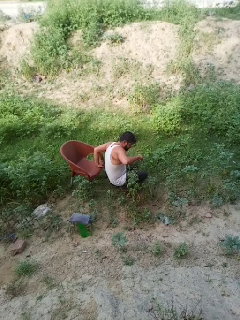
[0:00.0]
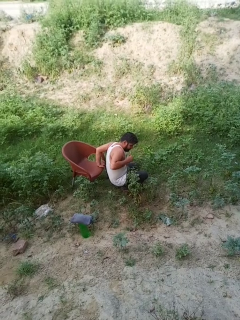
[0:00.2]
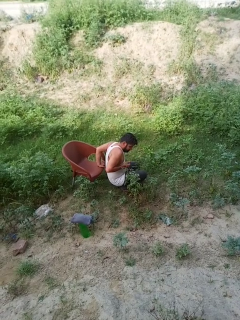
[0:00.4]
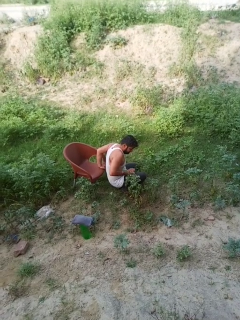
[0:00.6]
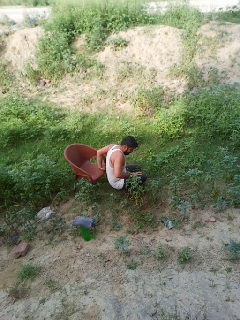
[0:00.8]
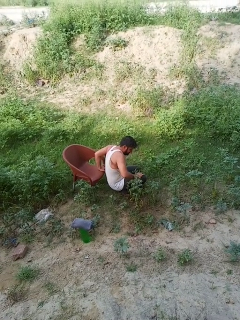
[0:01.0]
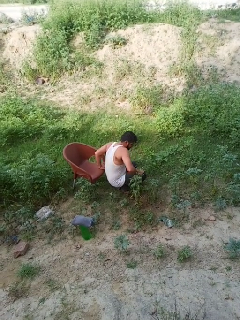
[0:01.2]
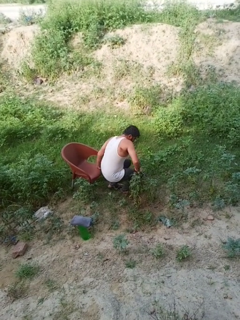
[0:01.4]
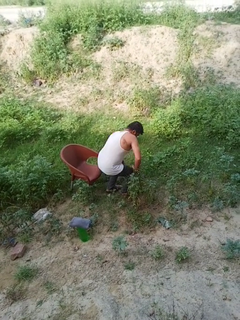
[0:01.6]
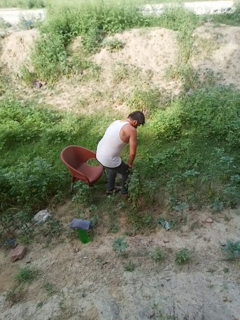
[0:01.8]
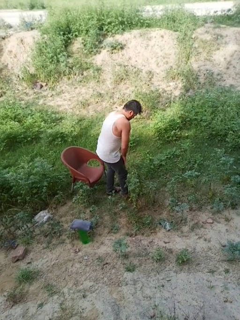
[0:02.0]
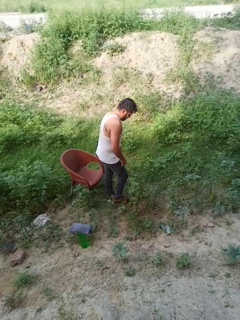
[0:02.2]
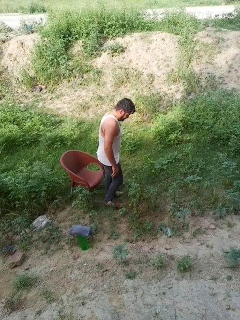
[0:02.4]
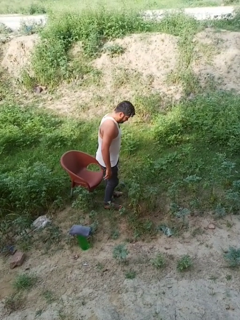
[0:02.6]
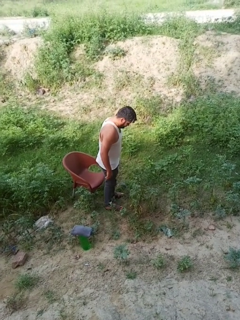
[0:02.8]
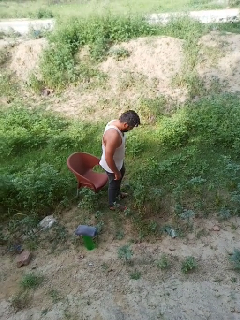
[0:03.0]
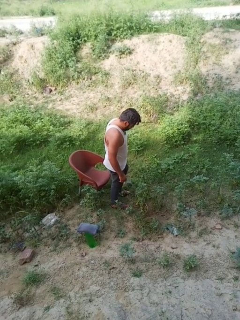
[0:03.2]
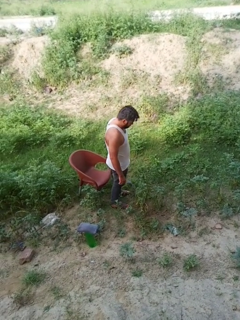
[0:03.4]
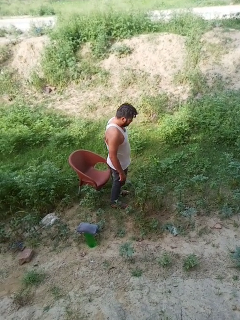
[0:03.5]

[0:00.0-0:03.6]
person stands up from floor

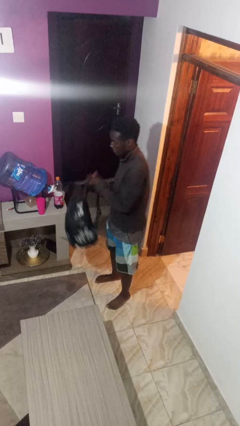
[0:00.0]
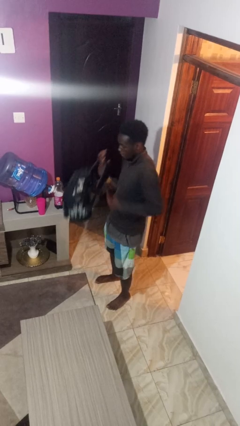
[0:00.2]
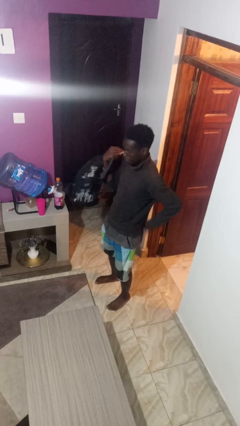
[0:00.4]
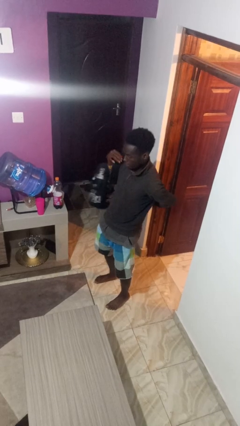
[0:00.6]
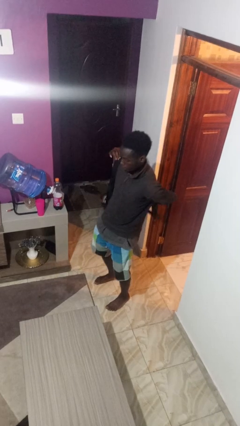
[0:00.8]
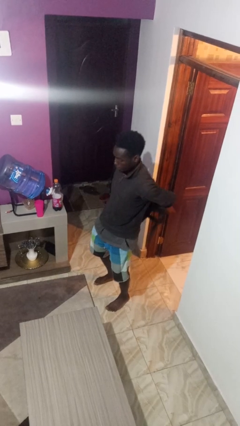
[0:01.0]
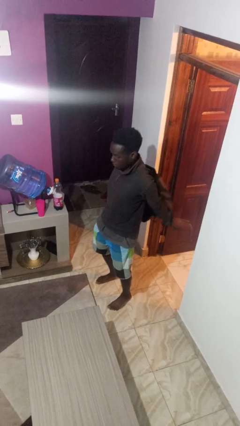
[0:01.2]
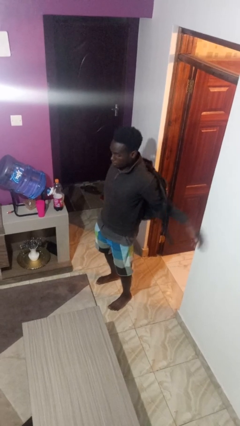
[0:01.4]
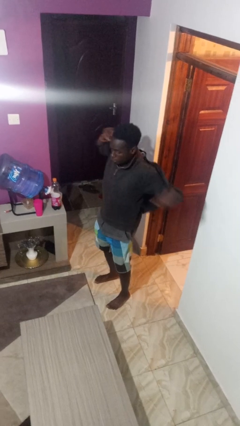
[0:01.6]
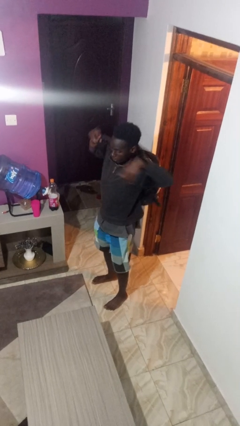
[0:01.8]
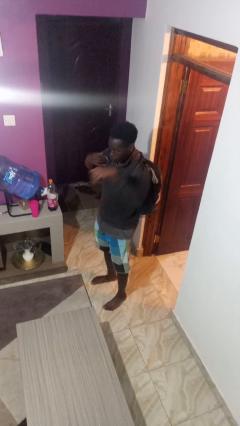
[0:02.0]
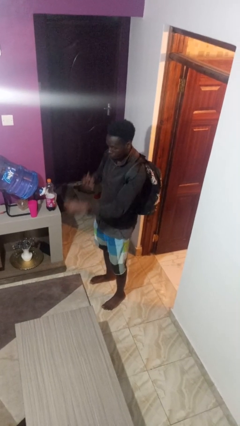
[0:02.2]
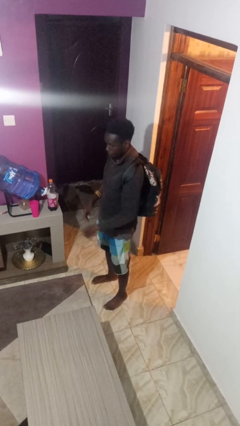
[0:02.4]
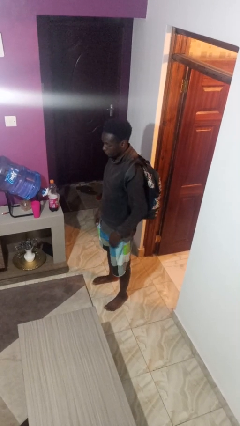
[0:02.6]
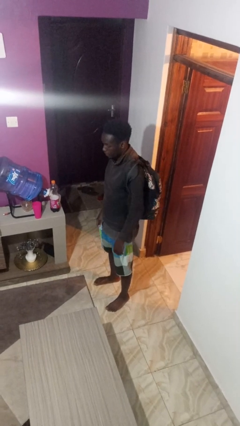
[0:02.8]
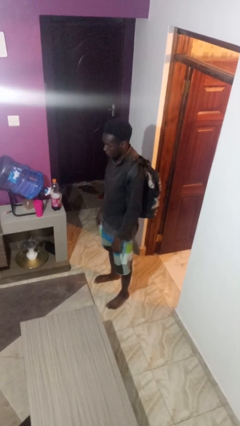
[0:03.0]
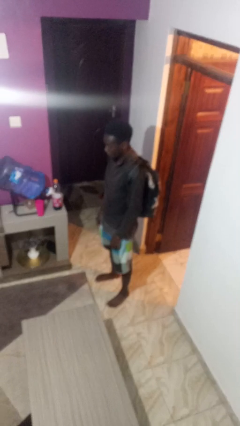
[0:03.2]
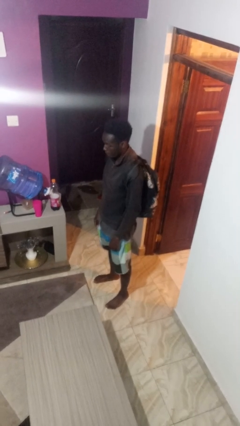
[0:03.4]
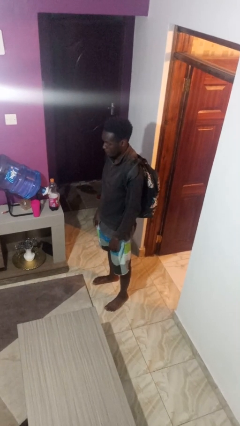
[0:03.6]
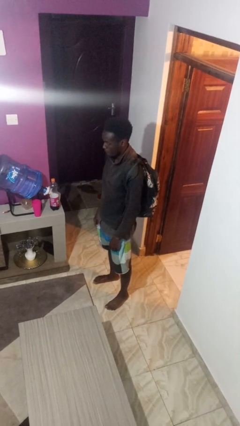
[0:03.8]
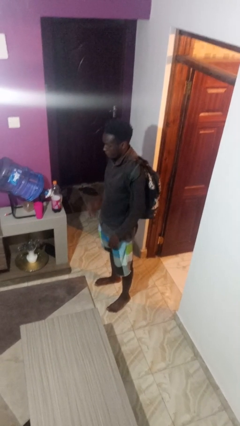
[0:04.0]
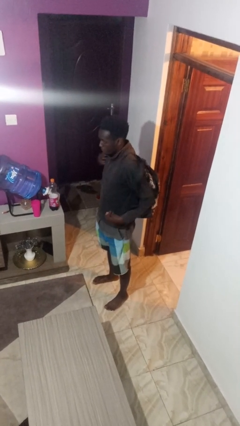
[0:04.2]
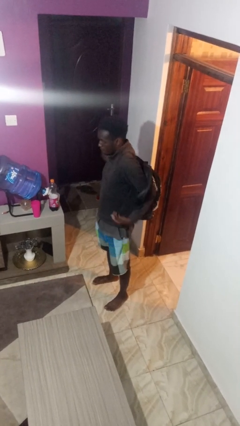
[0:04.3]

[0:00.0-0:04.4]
person puts on backpack

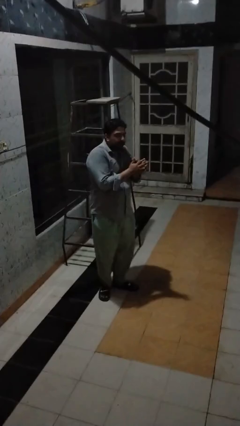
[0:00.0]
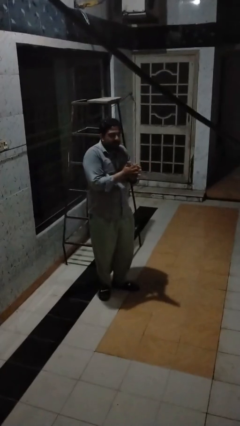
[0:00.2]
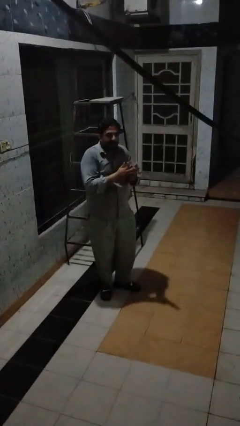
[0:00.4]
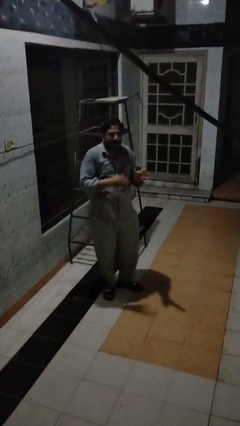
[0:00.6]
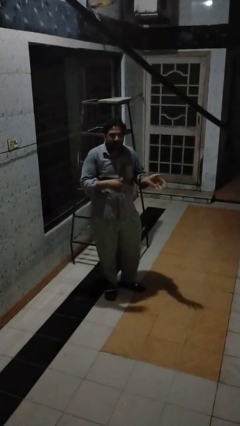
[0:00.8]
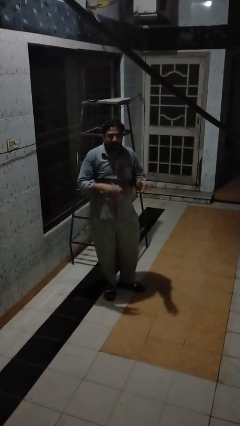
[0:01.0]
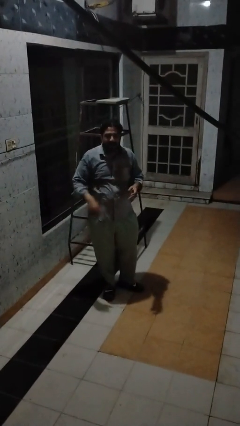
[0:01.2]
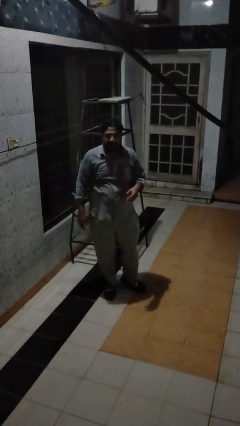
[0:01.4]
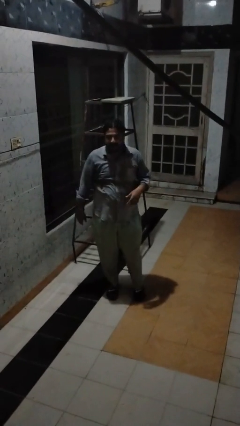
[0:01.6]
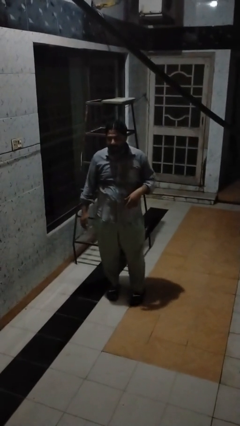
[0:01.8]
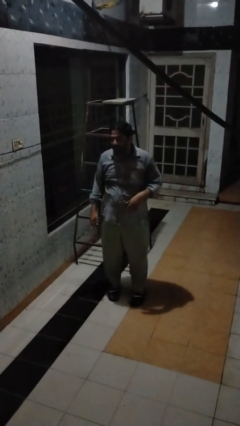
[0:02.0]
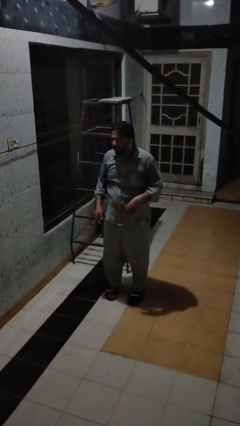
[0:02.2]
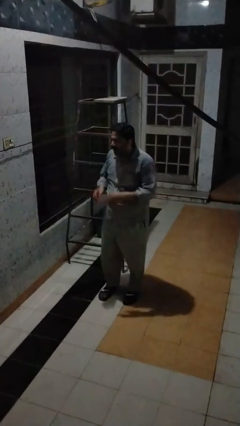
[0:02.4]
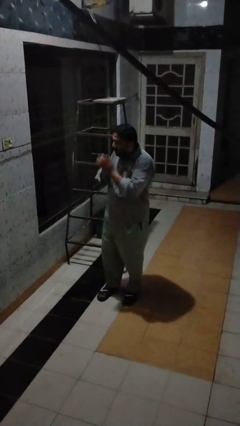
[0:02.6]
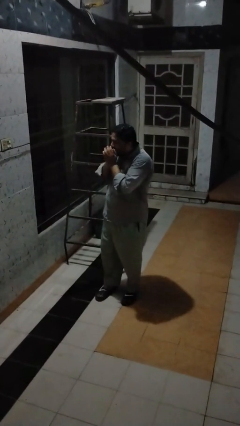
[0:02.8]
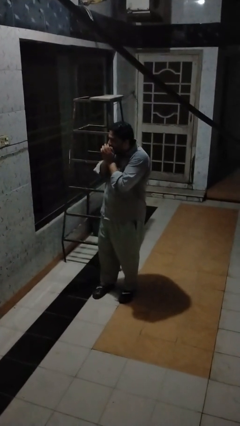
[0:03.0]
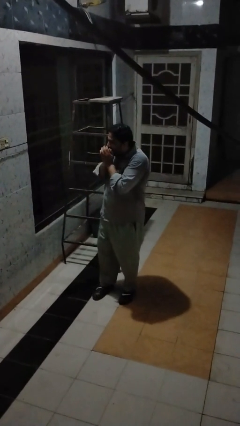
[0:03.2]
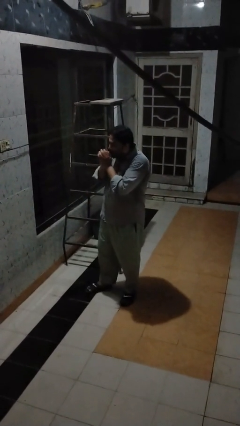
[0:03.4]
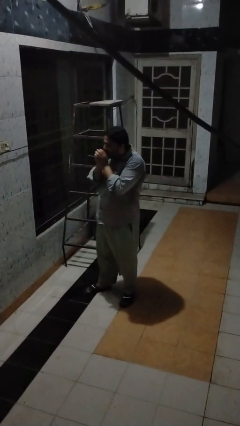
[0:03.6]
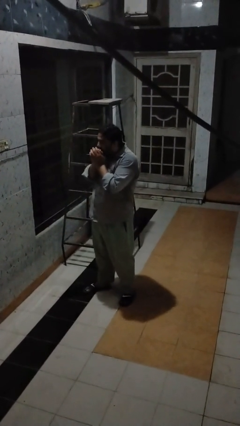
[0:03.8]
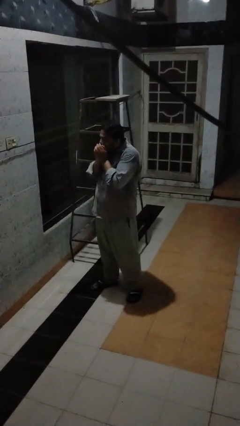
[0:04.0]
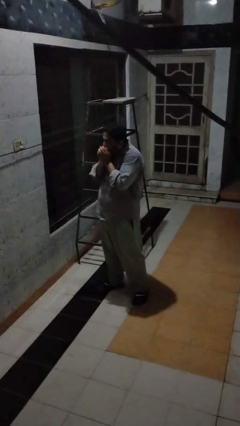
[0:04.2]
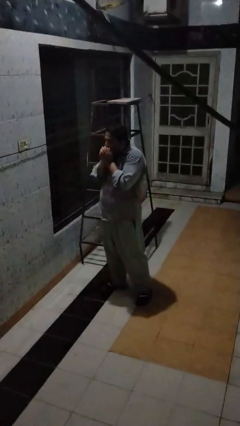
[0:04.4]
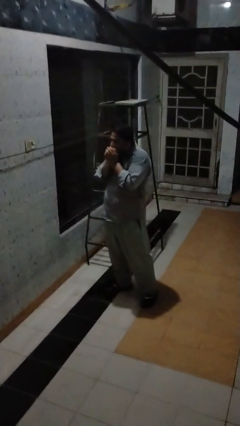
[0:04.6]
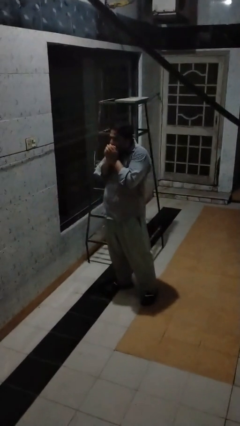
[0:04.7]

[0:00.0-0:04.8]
person blows into hands

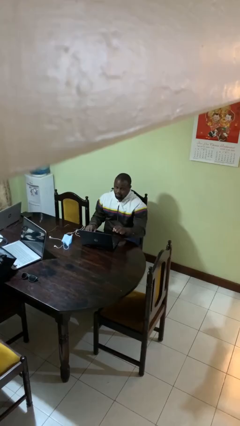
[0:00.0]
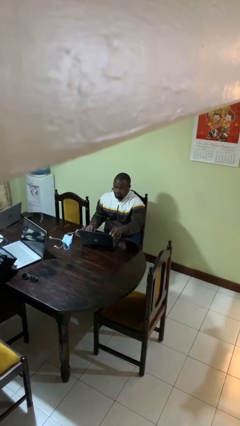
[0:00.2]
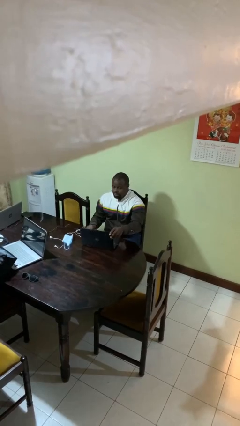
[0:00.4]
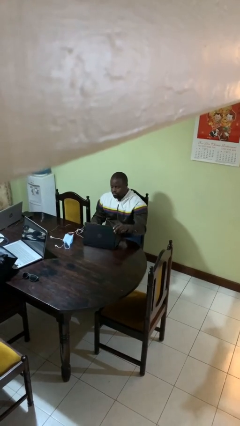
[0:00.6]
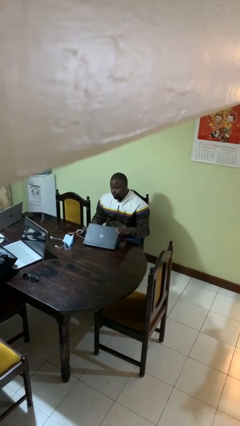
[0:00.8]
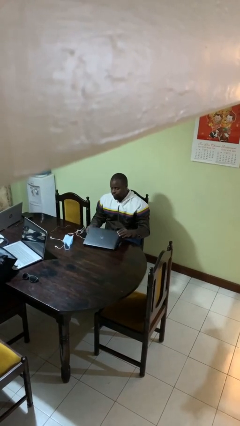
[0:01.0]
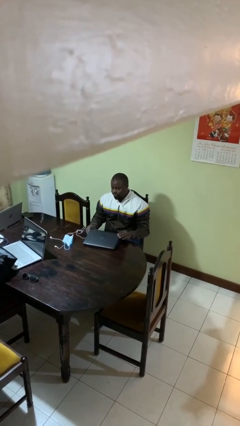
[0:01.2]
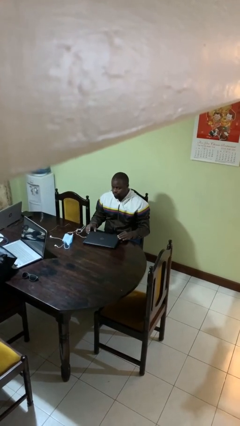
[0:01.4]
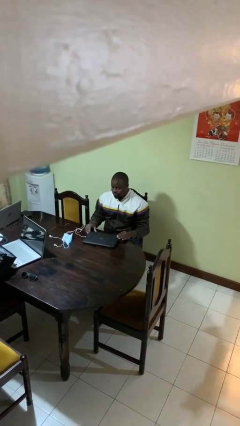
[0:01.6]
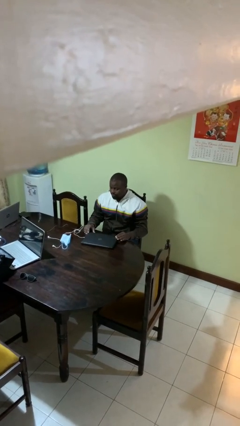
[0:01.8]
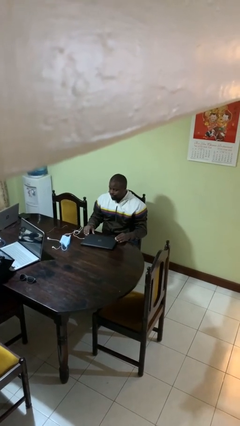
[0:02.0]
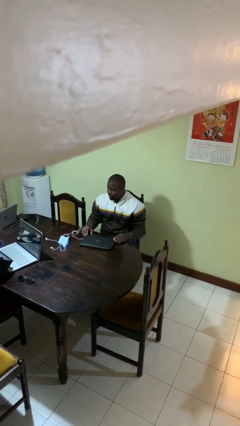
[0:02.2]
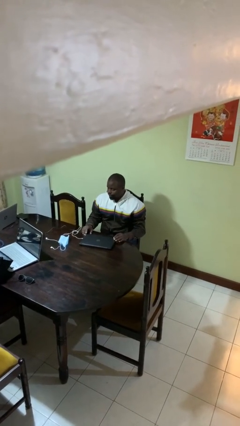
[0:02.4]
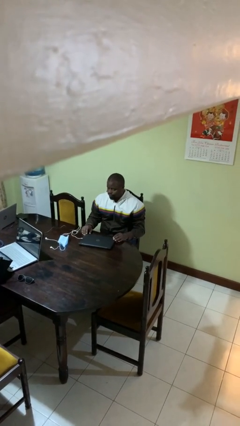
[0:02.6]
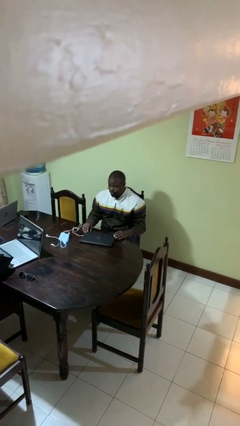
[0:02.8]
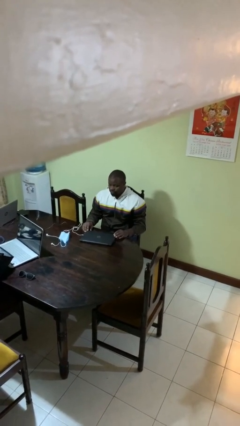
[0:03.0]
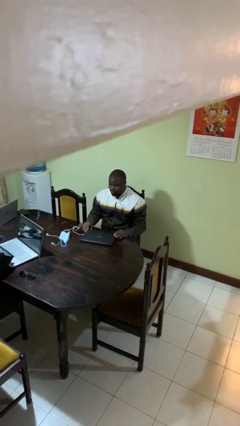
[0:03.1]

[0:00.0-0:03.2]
person closes laptop

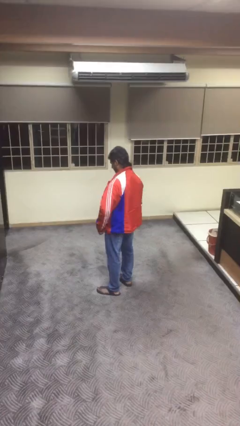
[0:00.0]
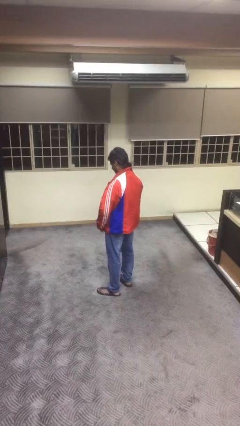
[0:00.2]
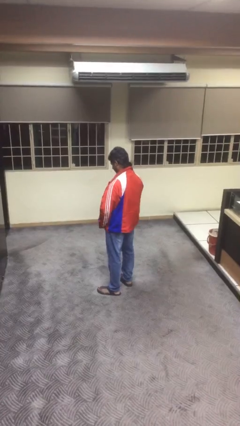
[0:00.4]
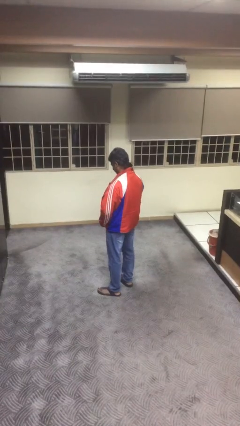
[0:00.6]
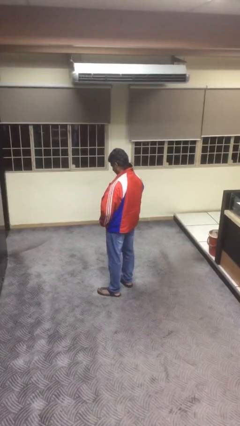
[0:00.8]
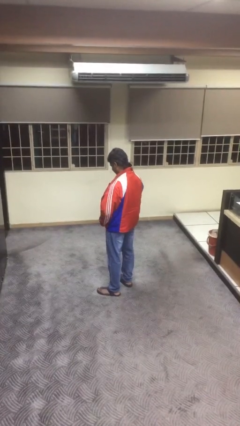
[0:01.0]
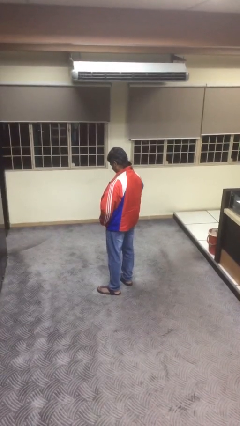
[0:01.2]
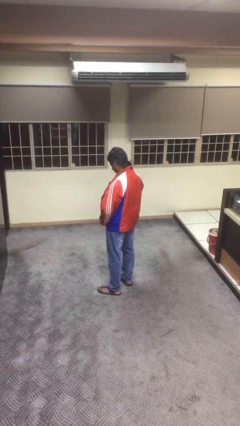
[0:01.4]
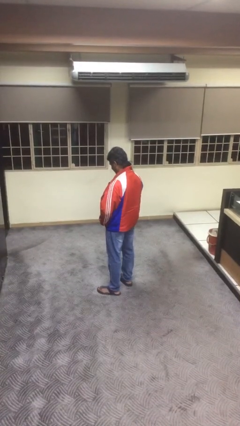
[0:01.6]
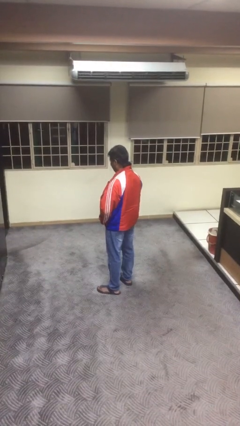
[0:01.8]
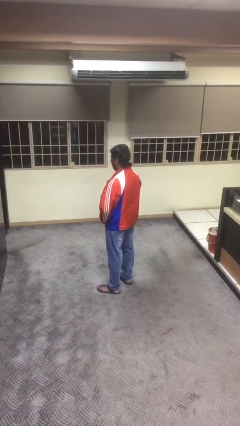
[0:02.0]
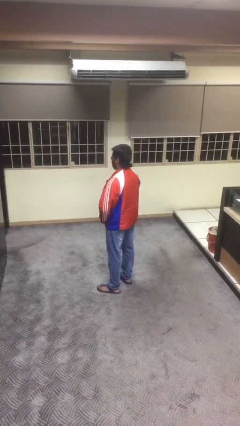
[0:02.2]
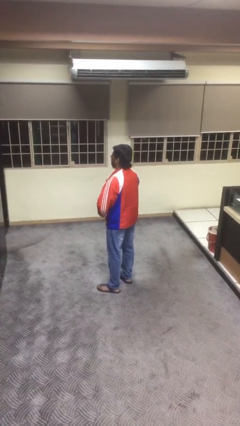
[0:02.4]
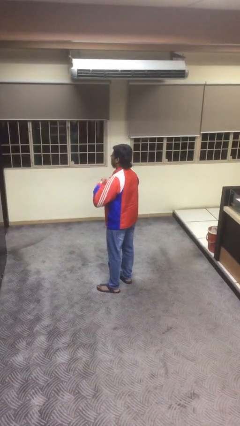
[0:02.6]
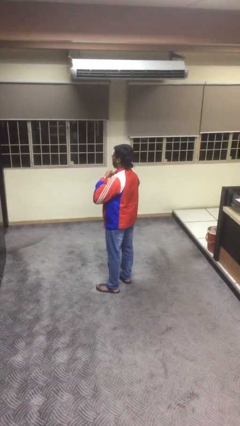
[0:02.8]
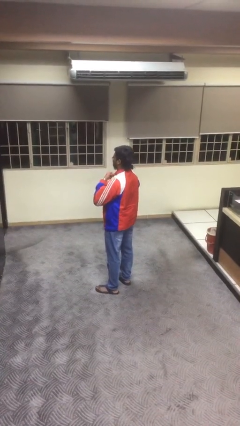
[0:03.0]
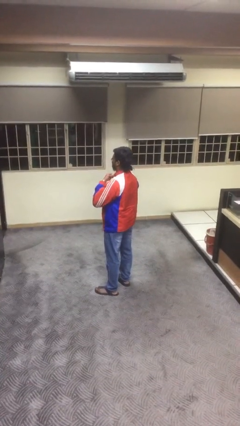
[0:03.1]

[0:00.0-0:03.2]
person zips up jacket
